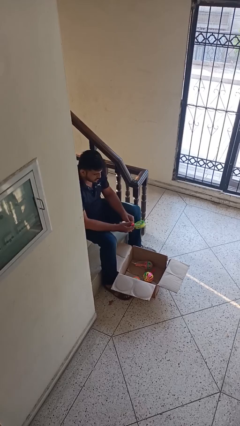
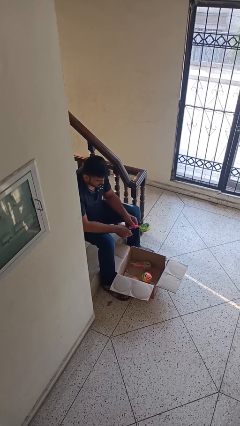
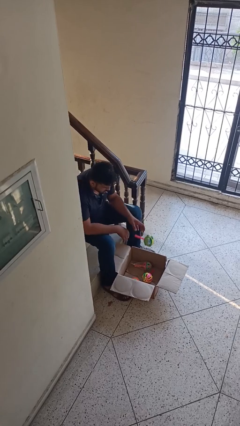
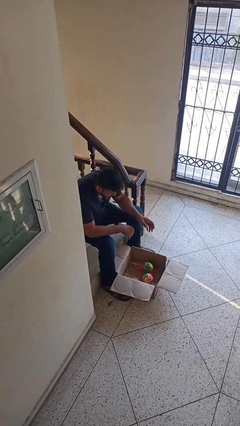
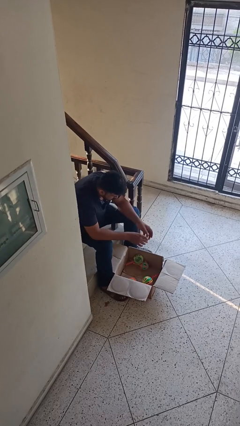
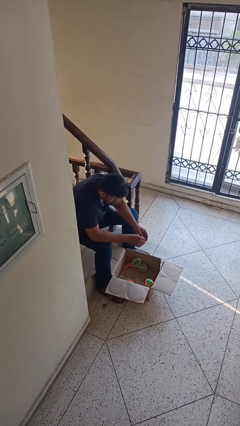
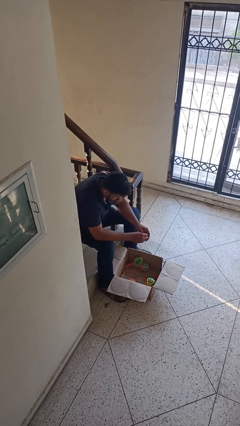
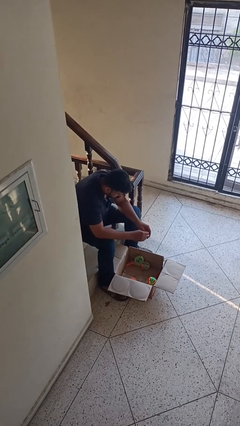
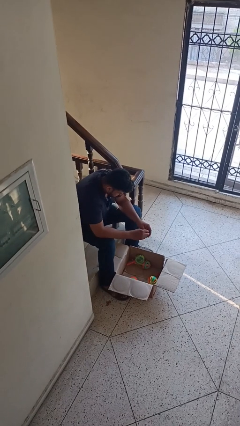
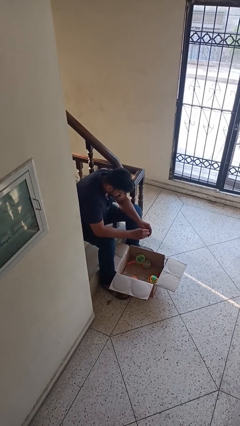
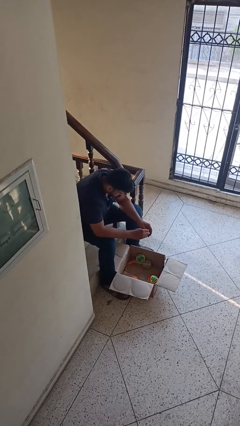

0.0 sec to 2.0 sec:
person puts object into box

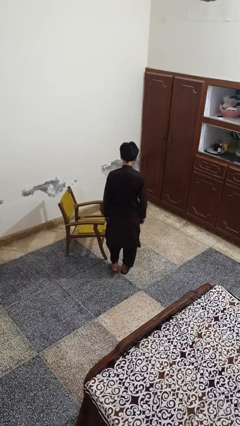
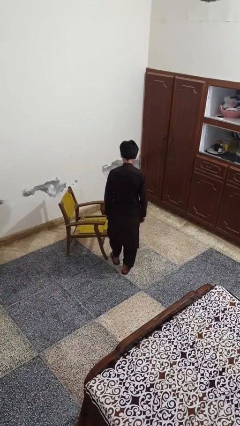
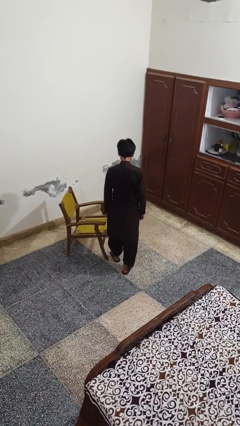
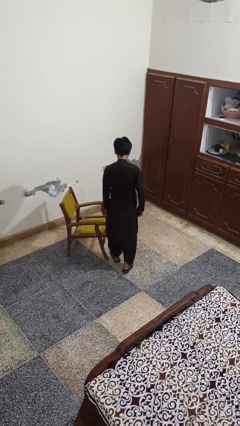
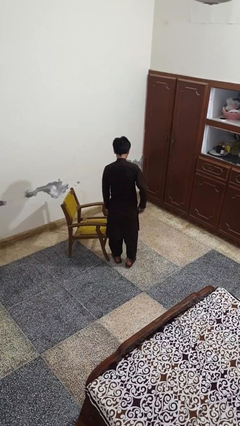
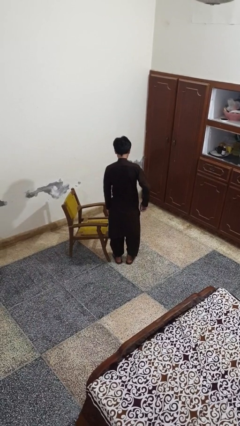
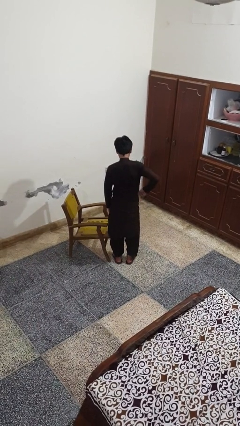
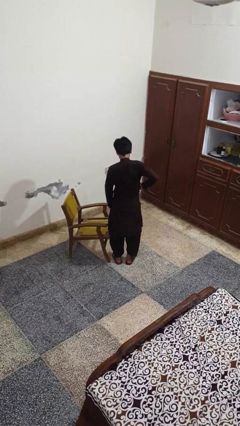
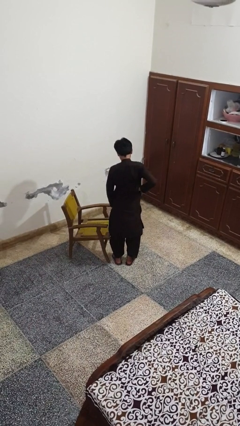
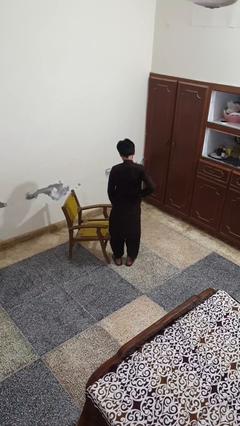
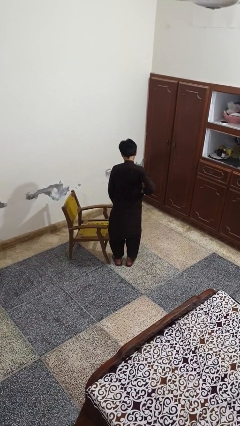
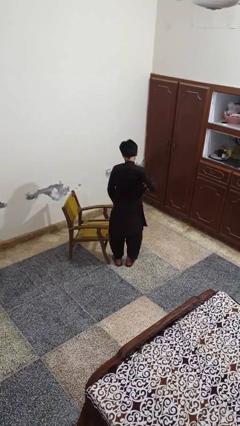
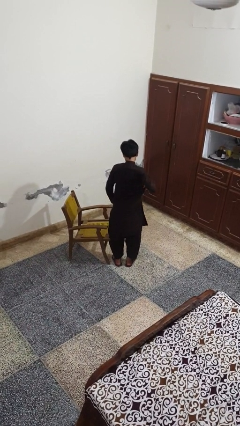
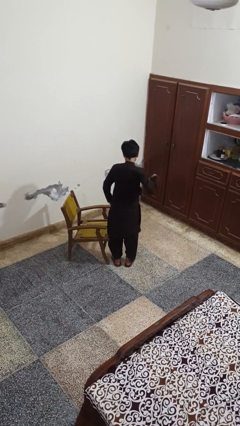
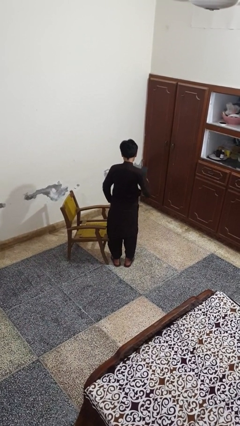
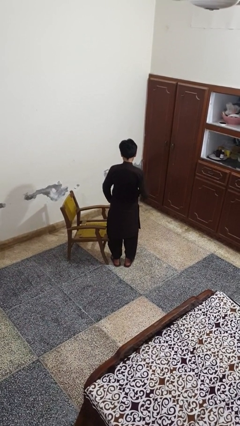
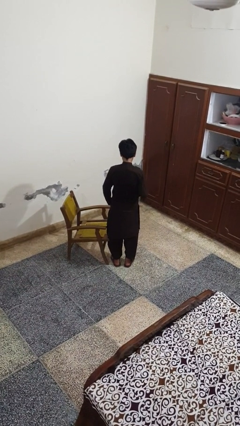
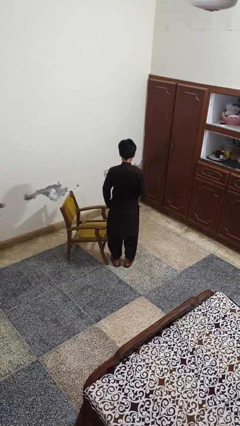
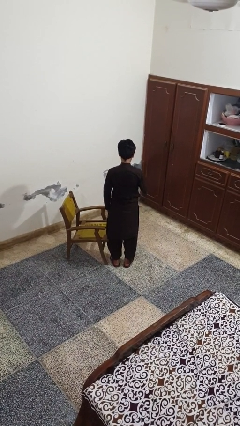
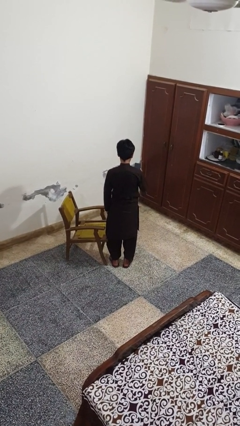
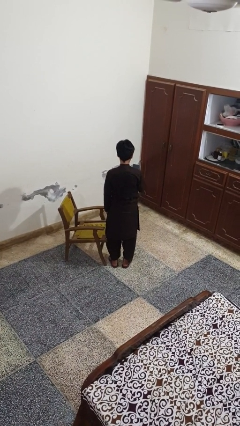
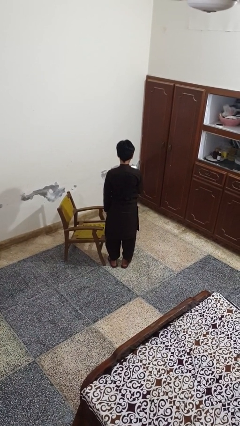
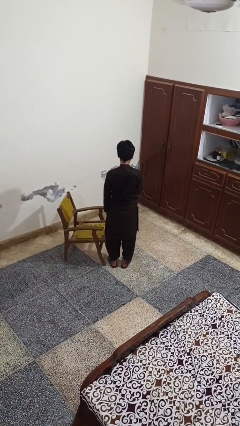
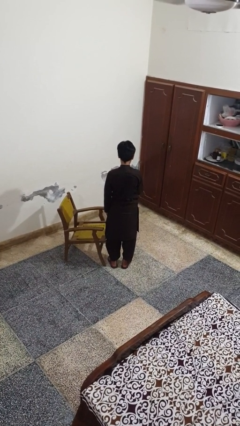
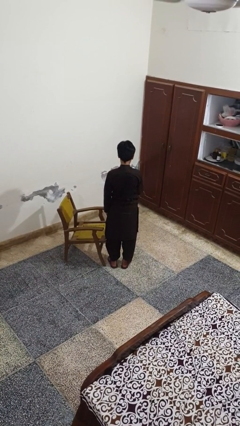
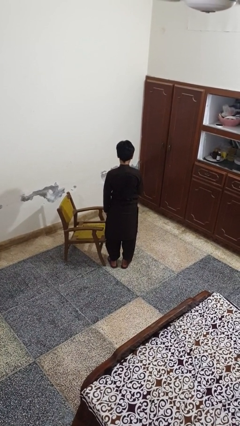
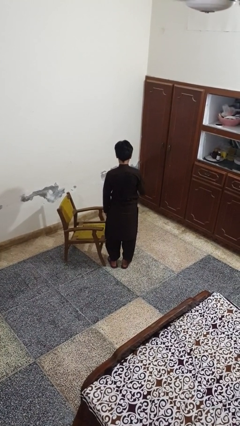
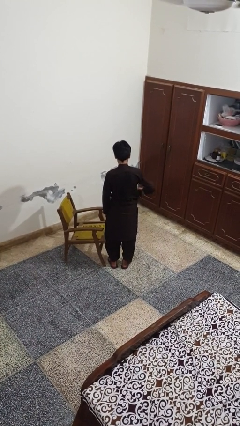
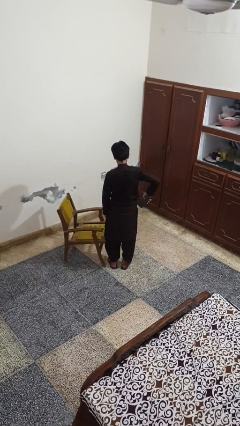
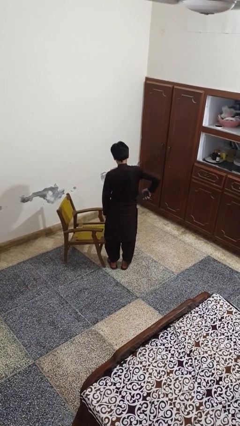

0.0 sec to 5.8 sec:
person takes phone from pocket

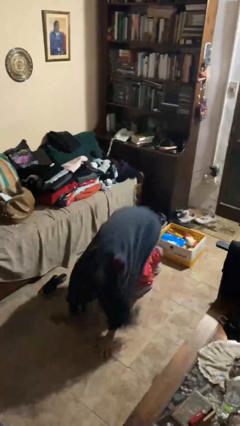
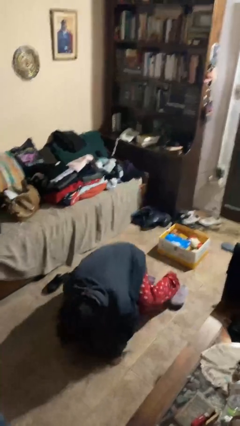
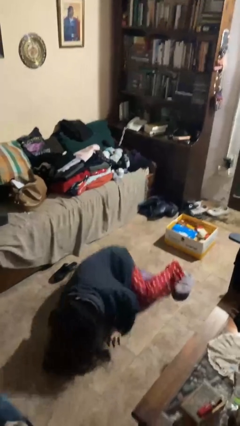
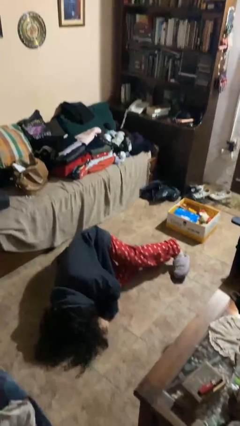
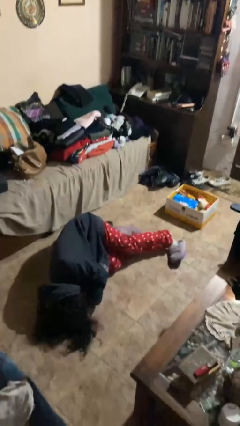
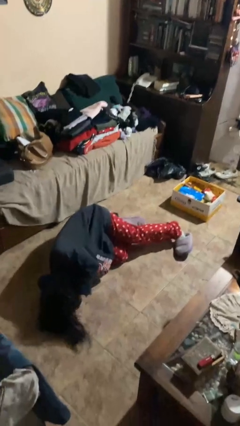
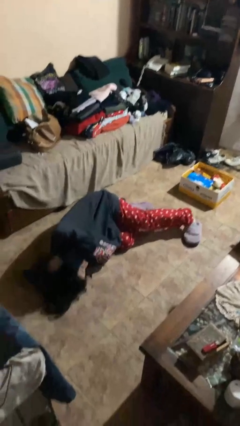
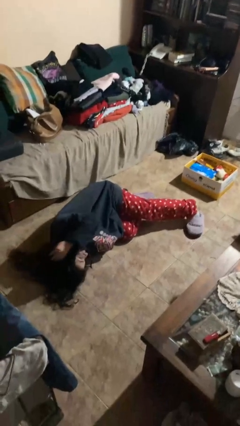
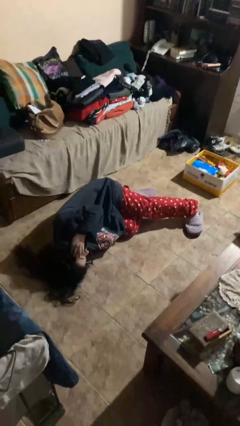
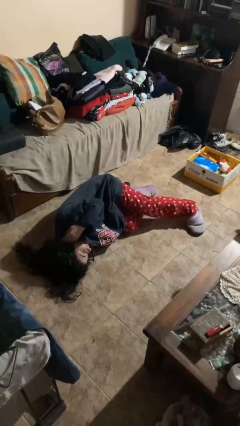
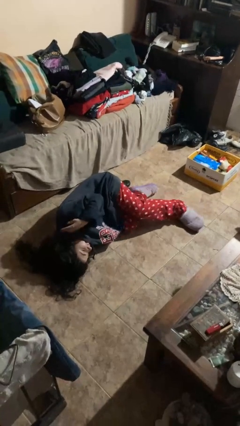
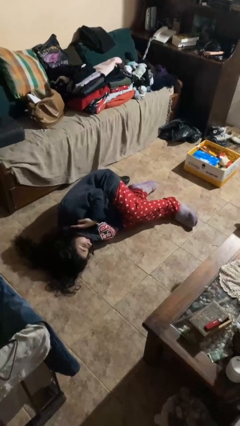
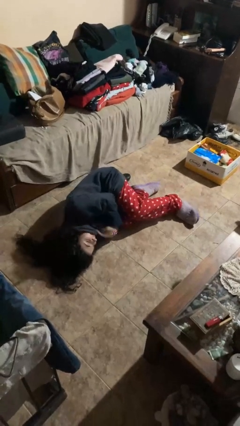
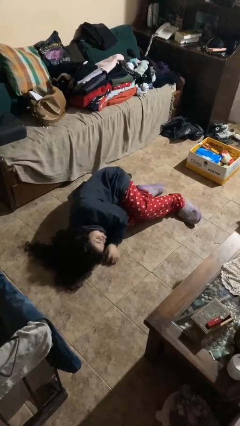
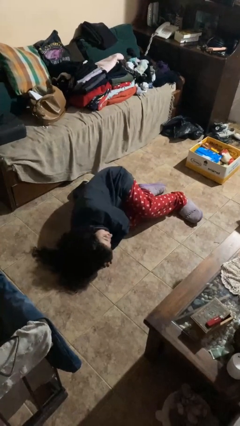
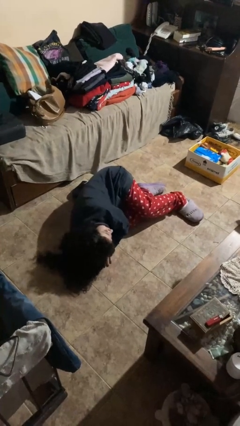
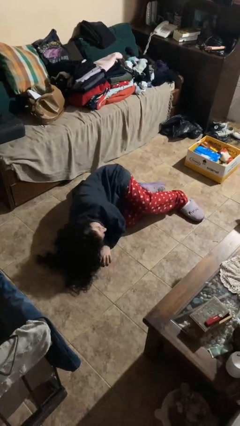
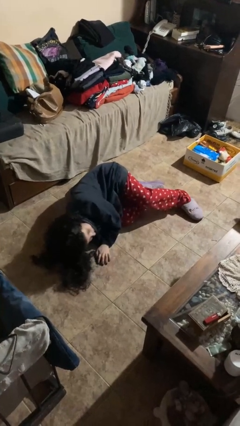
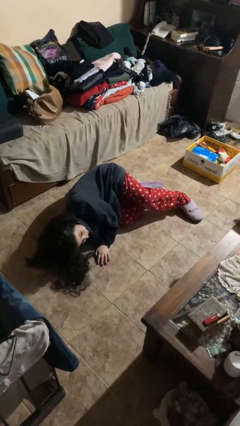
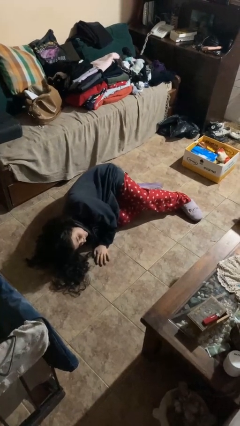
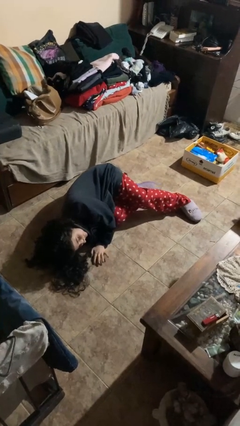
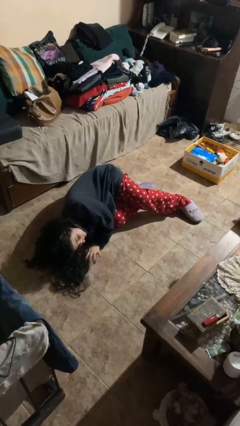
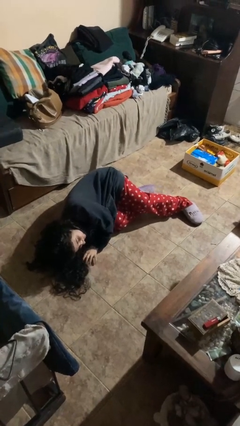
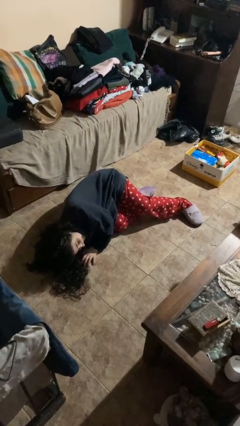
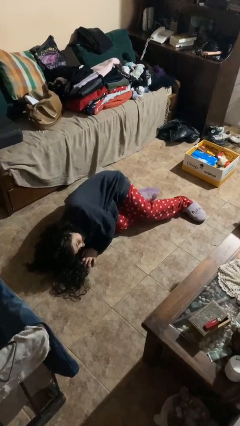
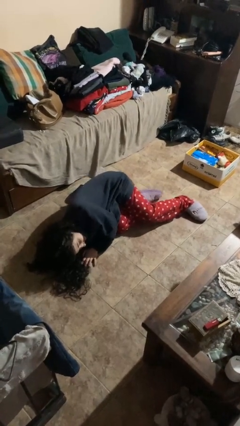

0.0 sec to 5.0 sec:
person lies down on floor

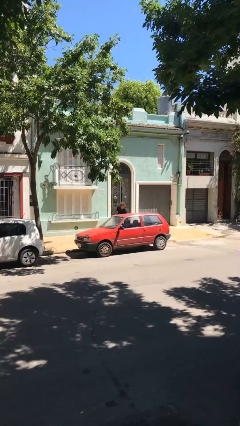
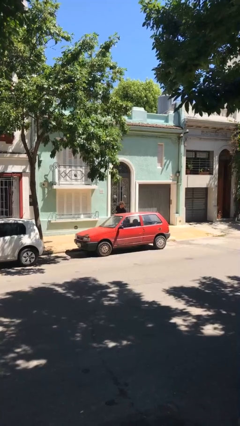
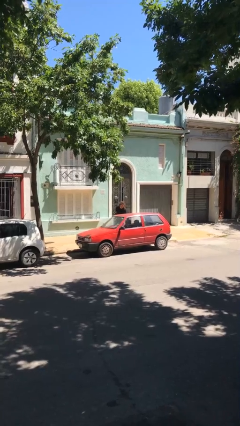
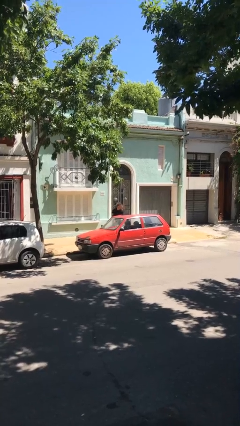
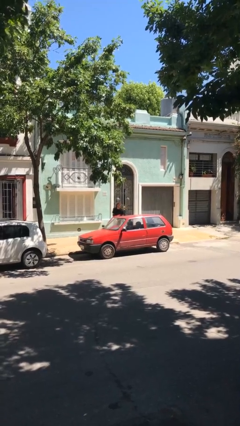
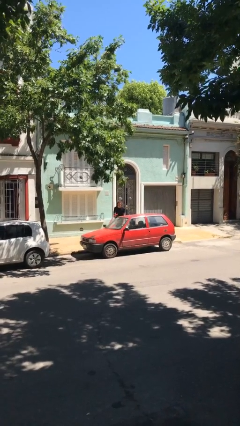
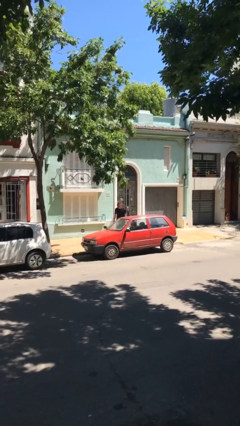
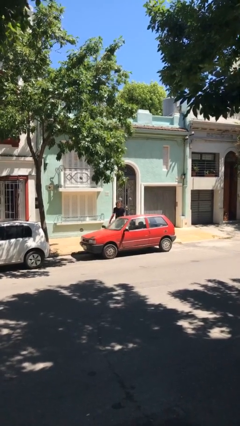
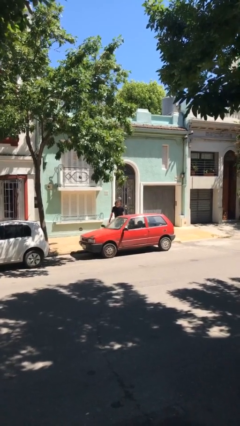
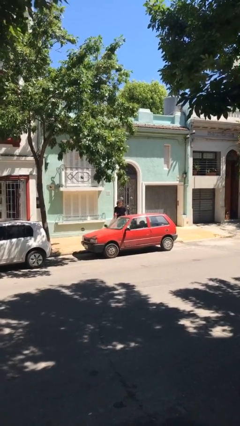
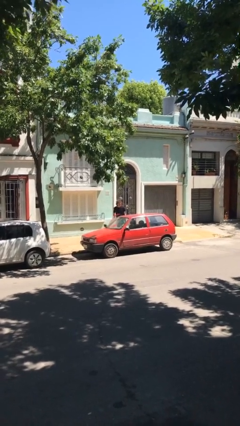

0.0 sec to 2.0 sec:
person opens car door

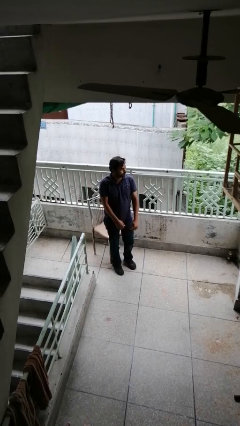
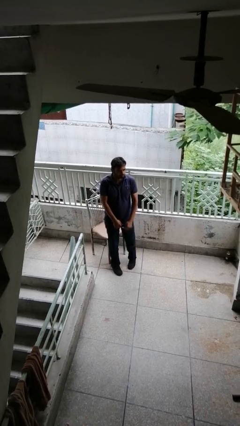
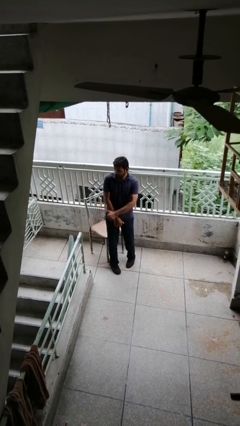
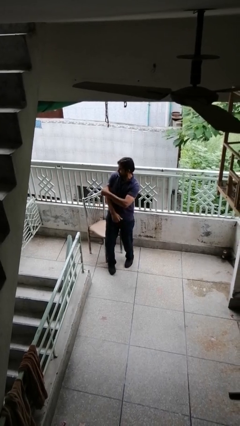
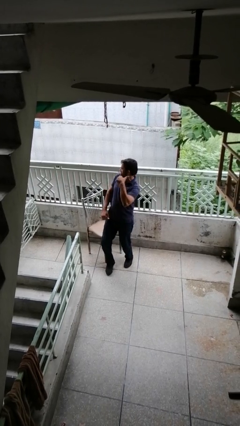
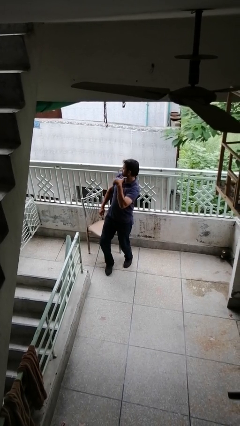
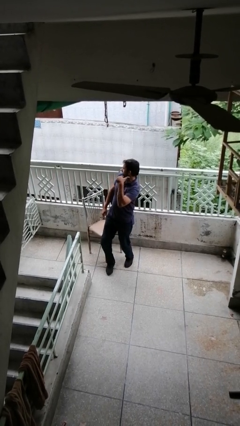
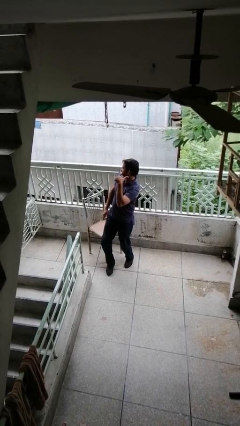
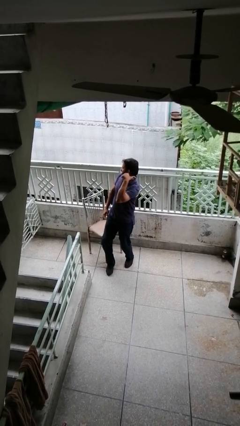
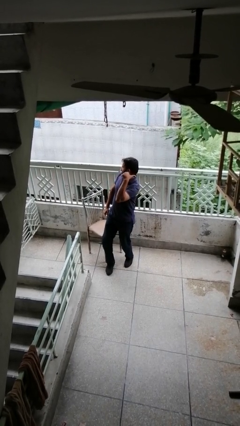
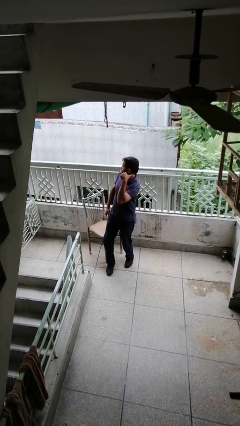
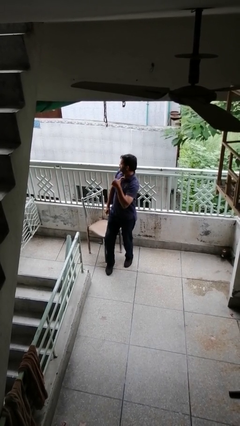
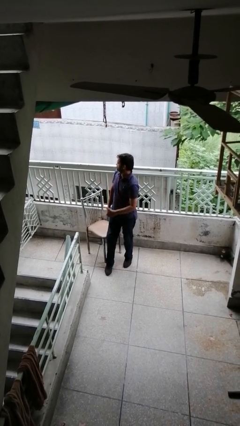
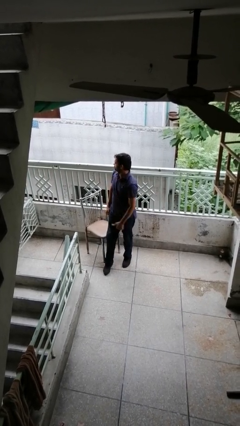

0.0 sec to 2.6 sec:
person gestures behind me
